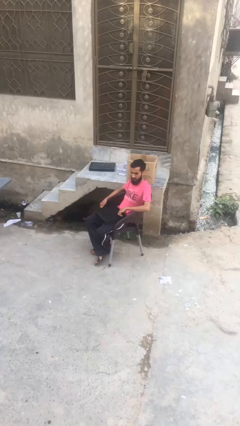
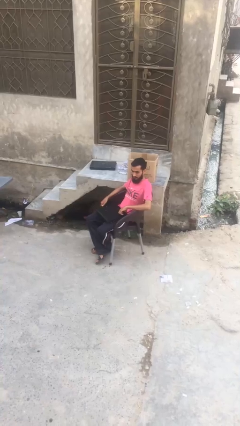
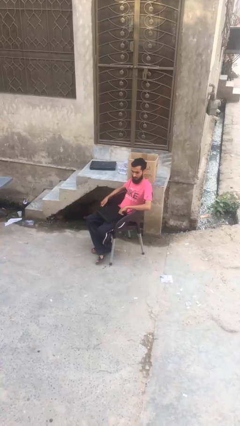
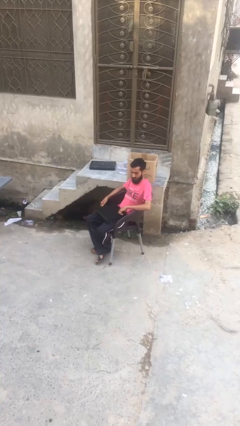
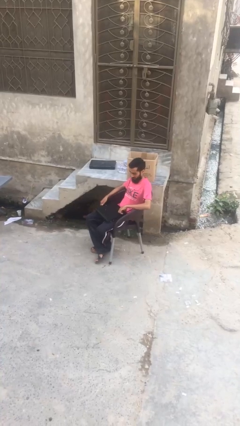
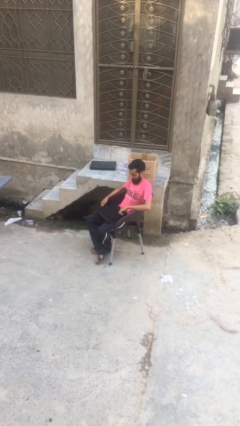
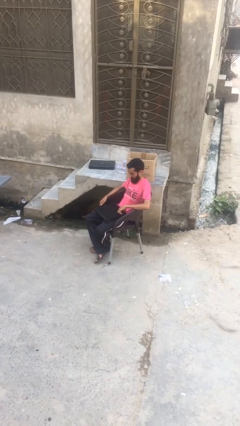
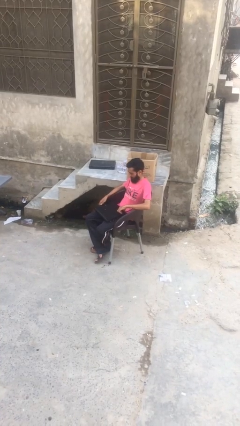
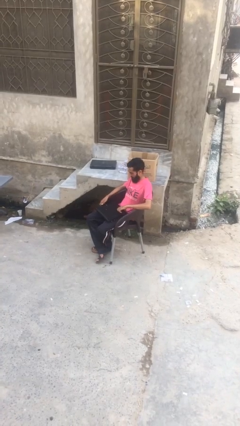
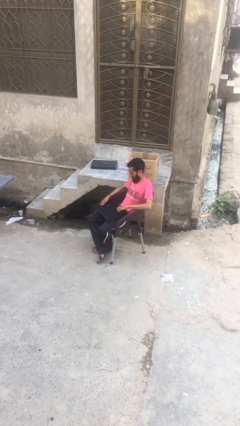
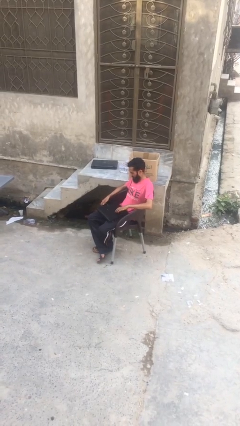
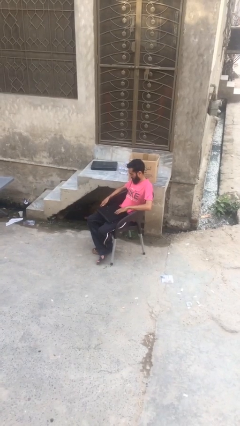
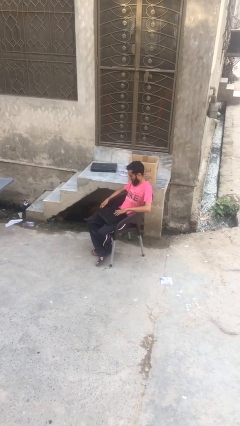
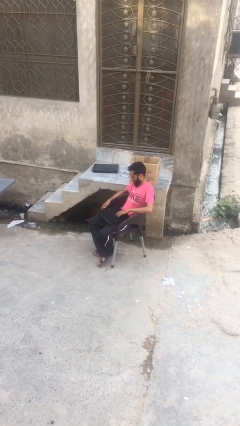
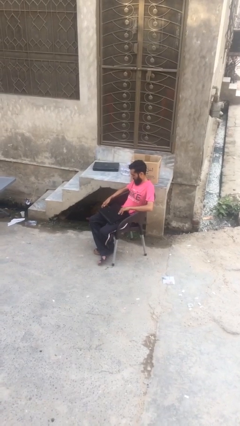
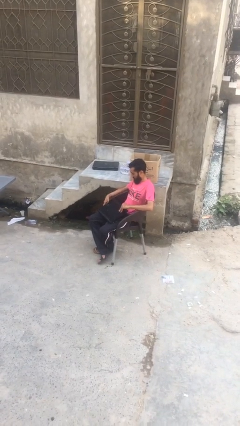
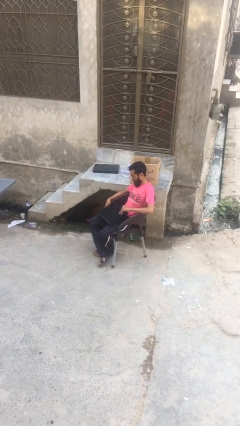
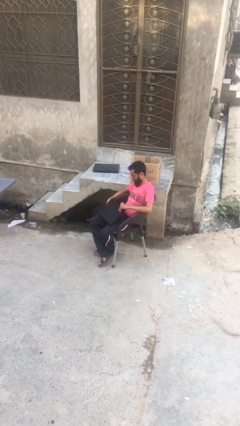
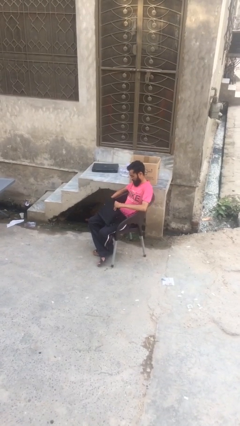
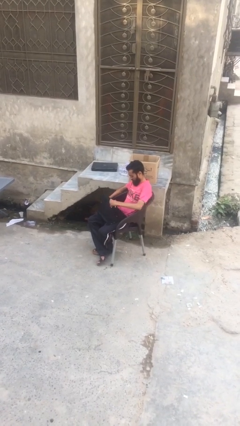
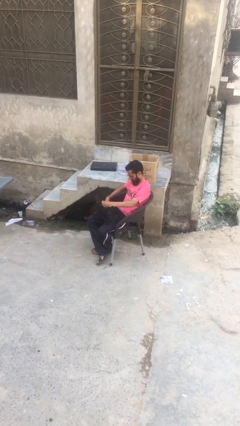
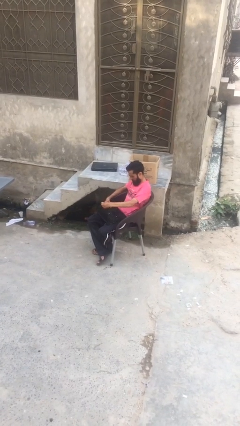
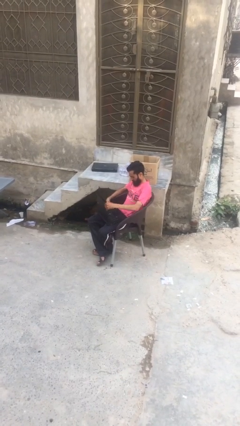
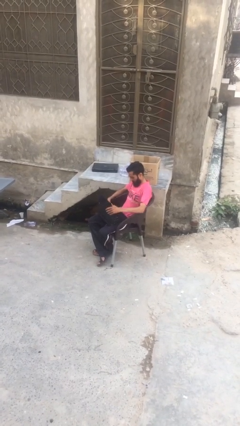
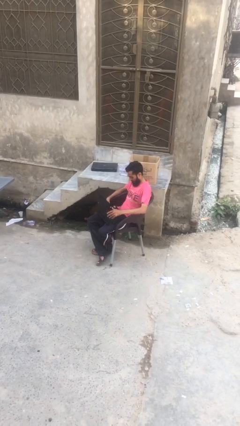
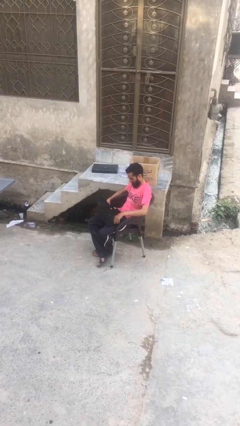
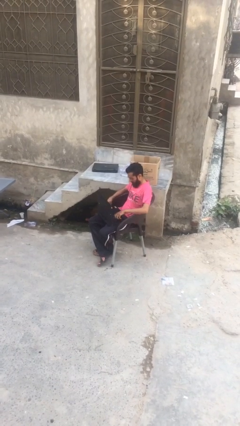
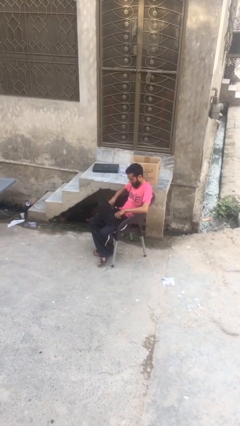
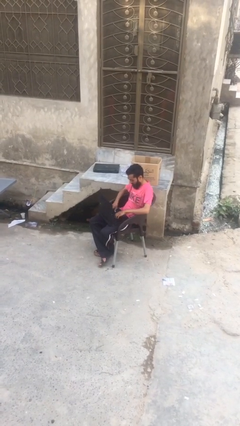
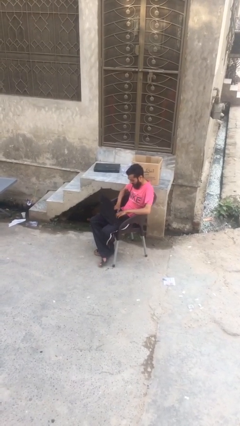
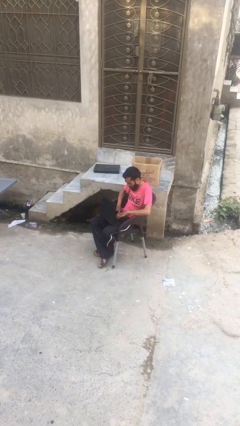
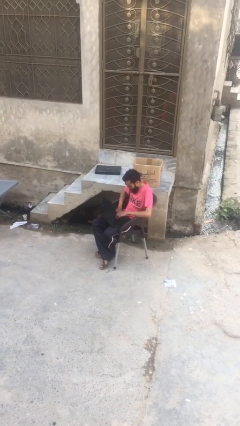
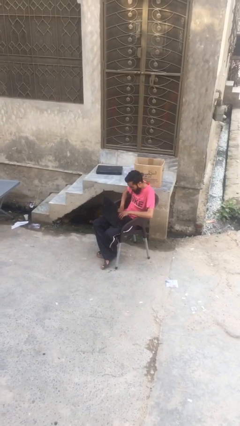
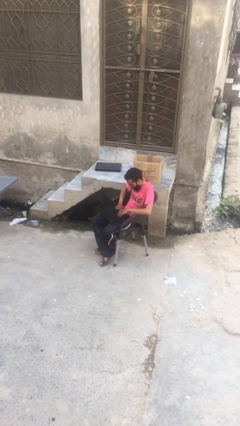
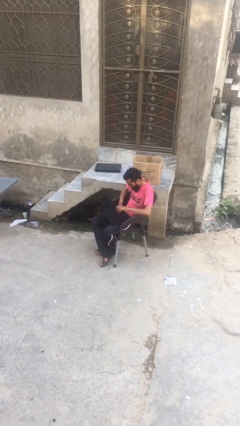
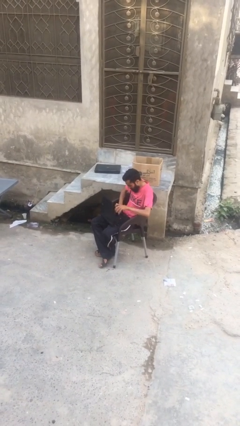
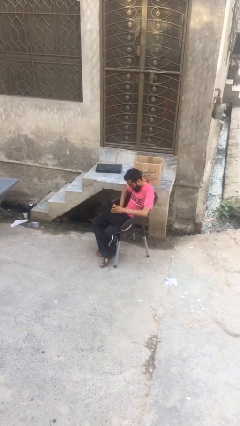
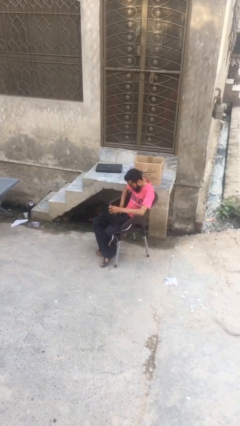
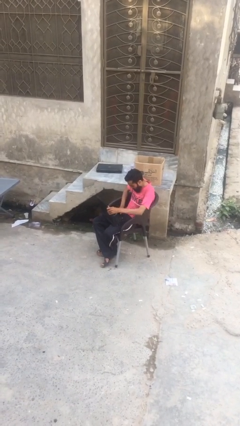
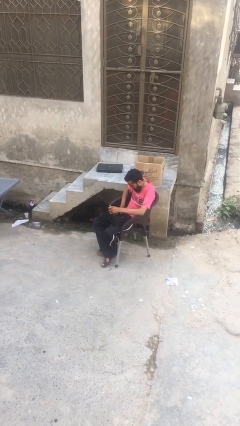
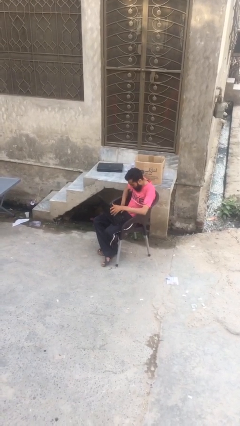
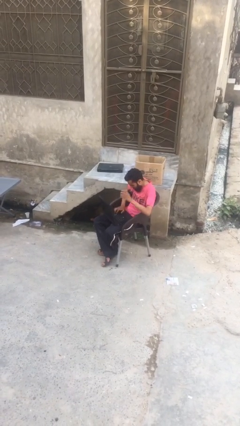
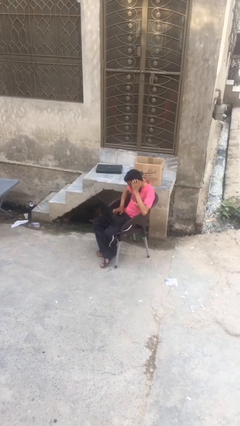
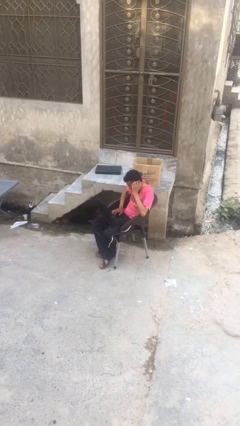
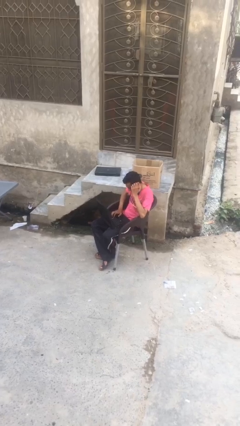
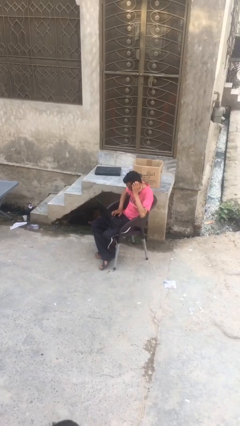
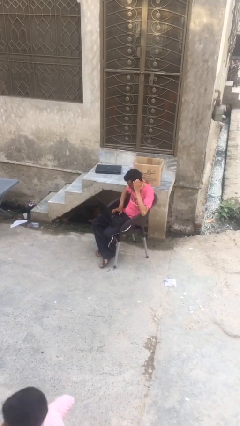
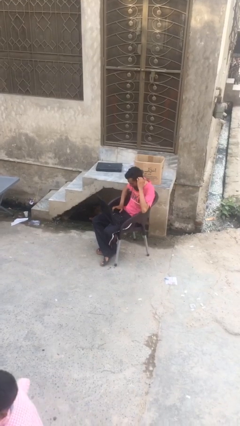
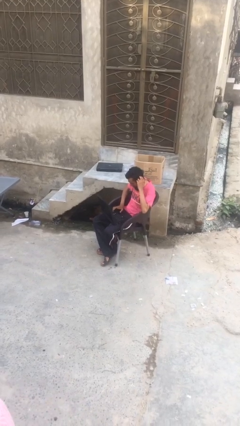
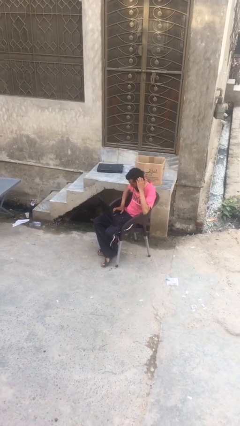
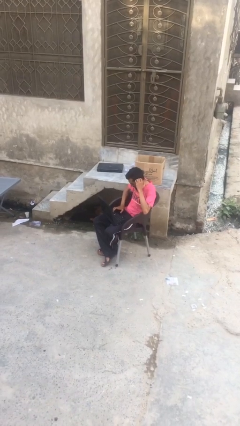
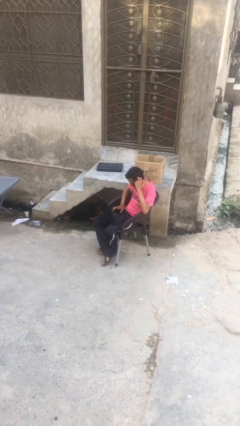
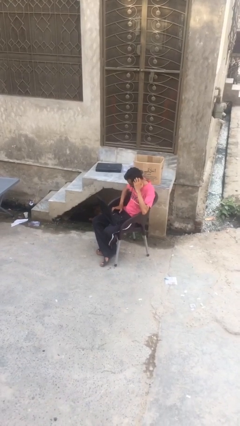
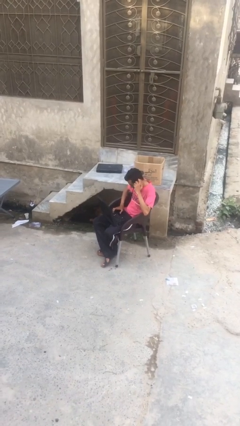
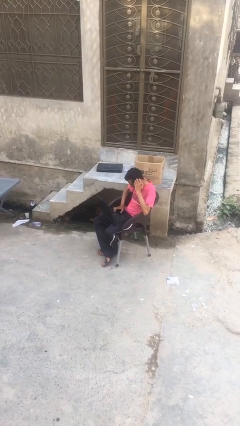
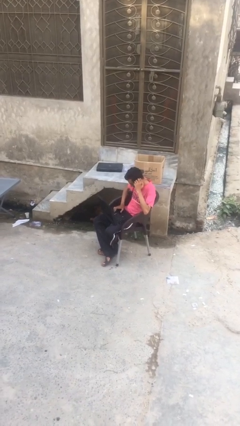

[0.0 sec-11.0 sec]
person interacts with laptop

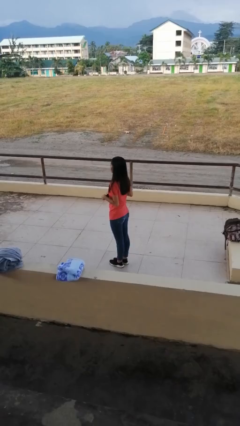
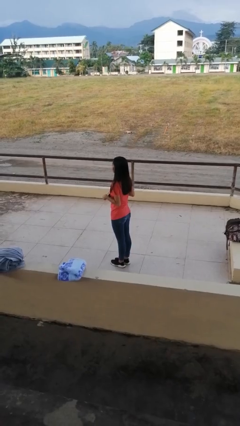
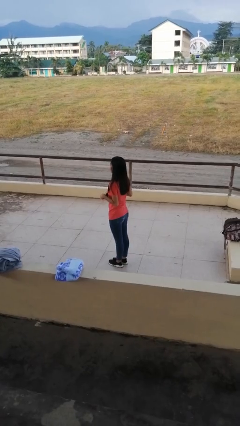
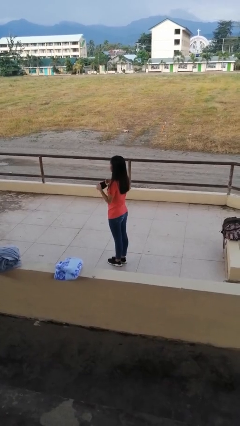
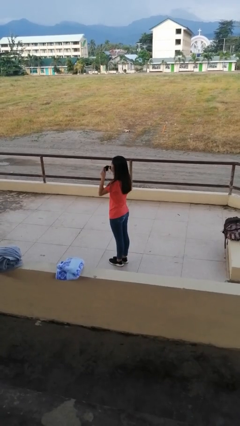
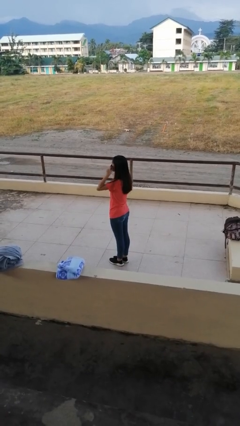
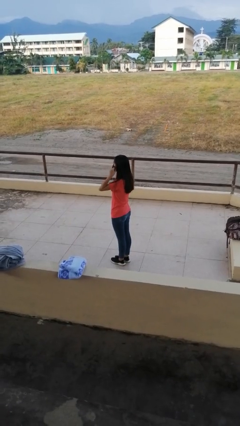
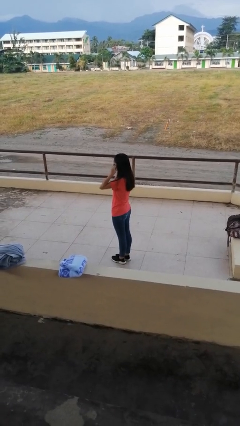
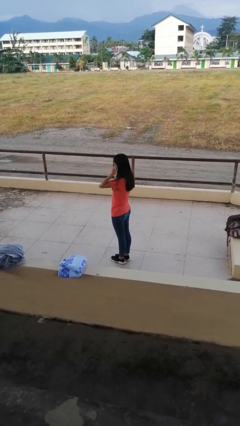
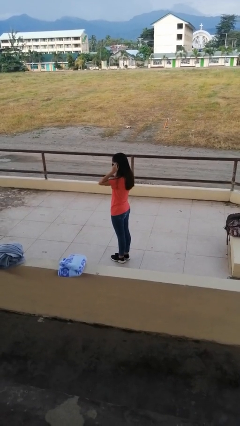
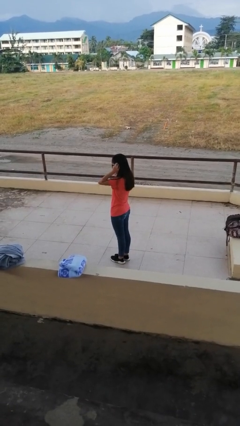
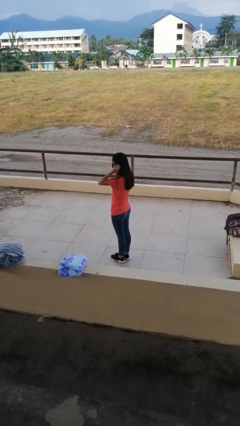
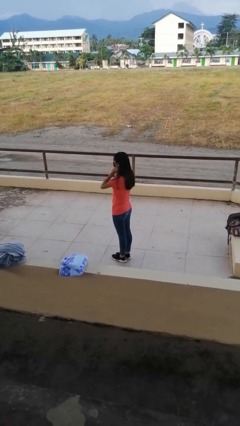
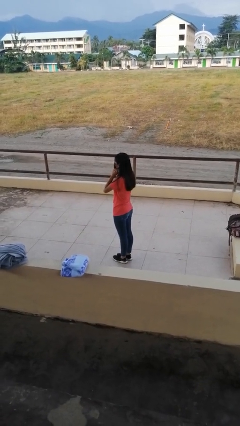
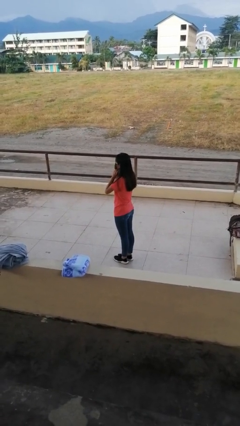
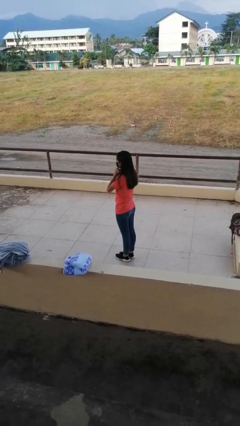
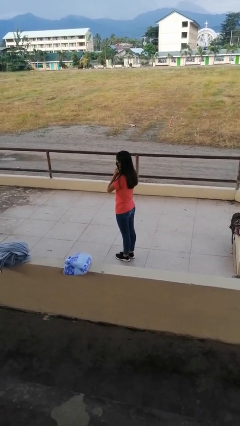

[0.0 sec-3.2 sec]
person puts on facemask

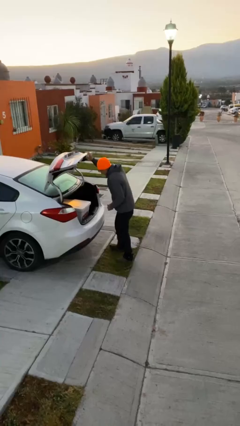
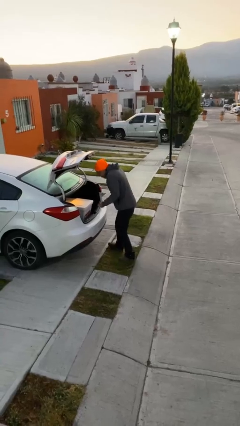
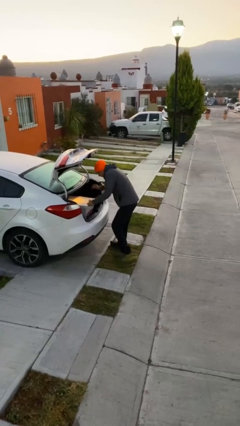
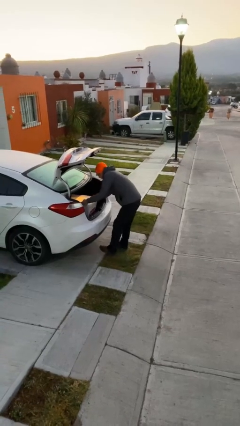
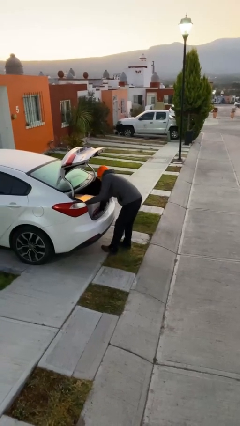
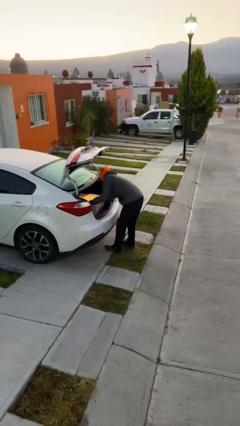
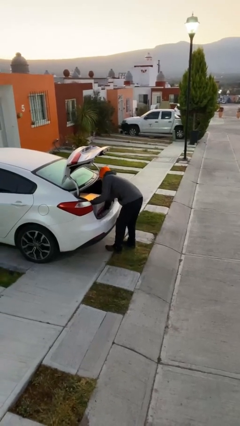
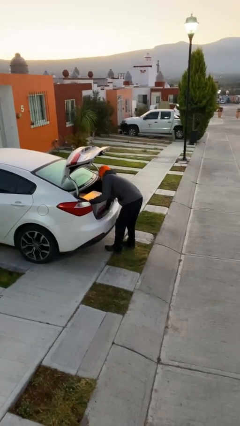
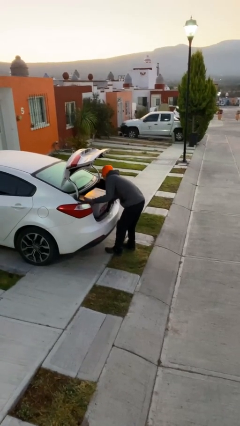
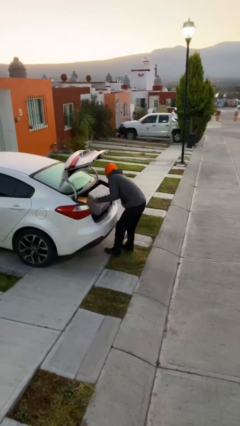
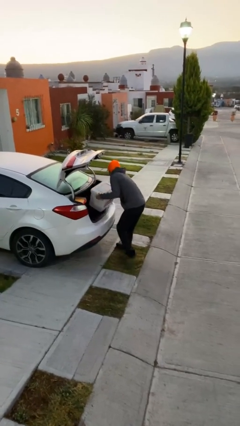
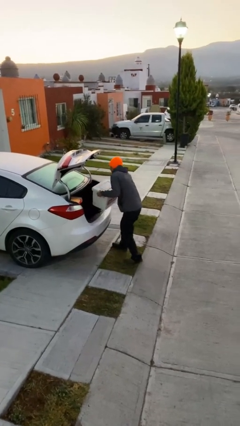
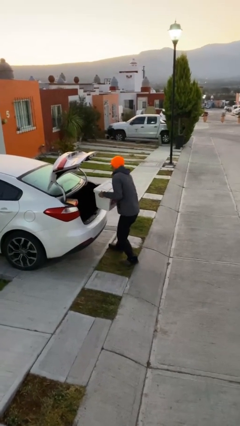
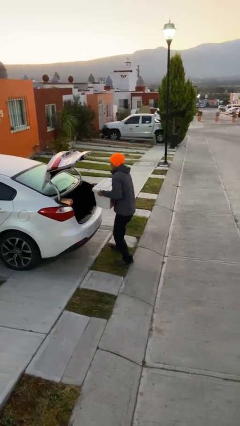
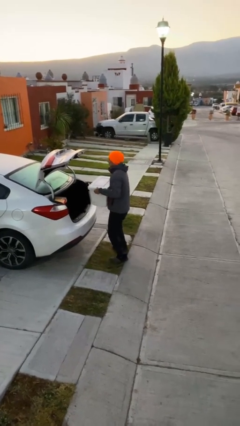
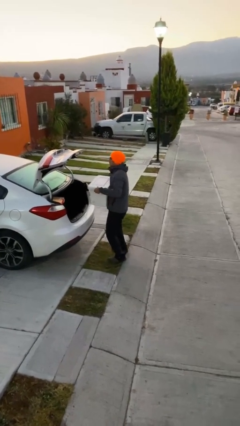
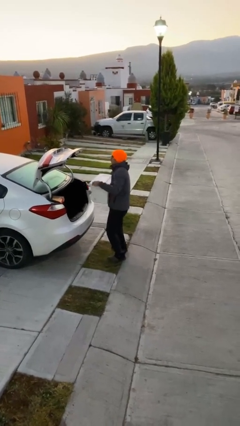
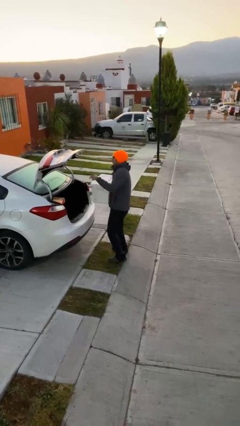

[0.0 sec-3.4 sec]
person unloads car

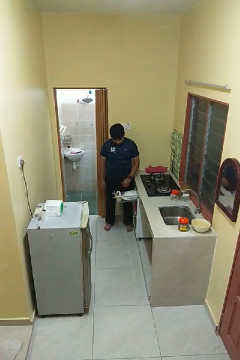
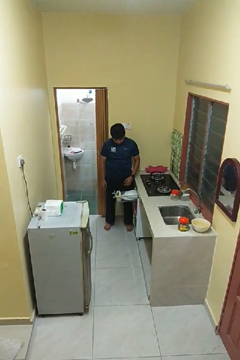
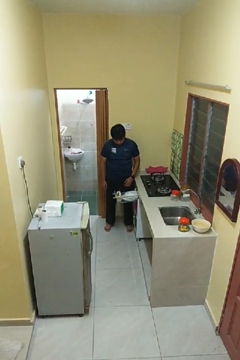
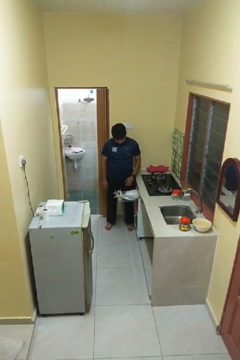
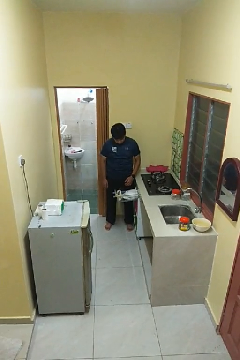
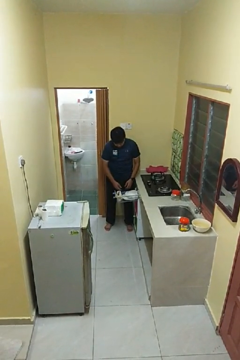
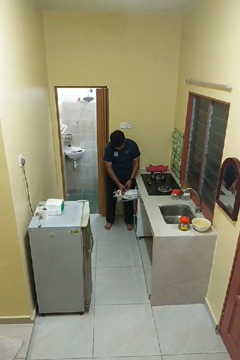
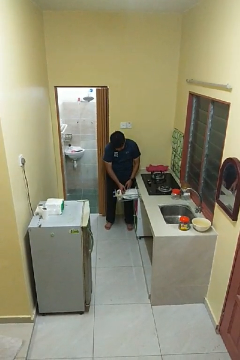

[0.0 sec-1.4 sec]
person searches in kitchen drawer
